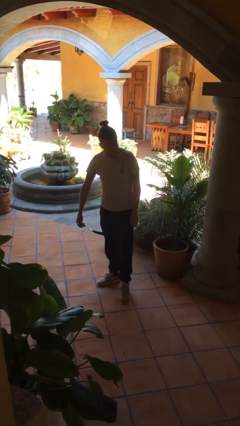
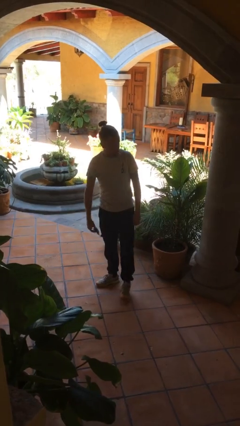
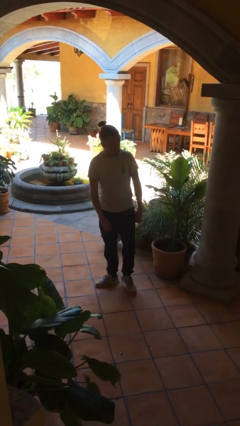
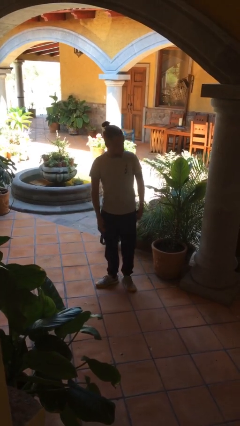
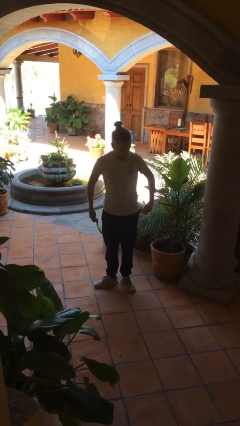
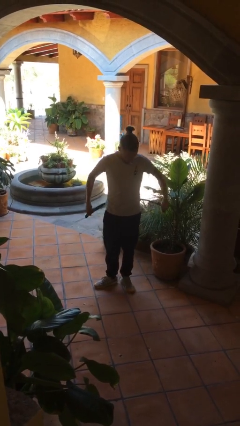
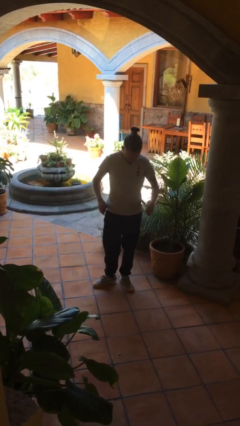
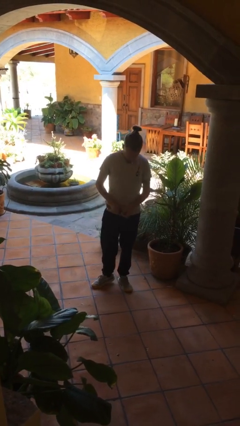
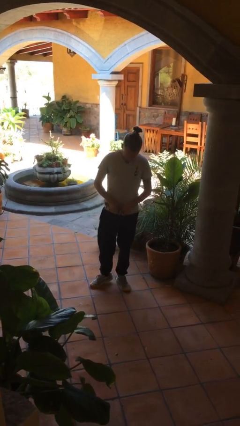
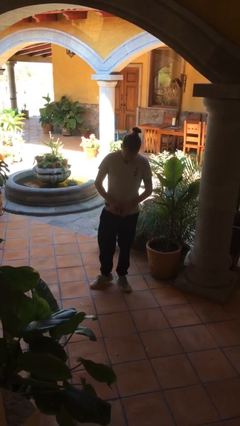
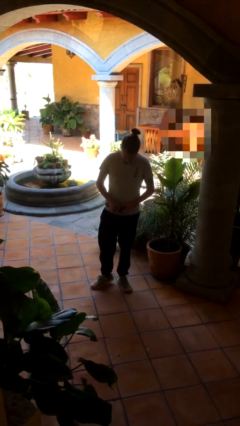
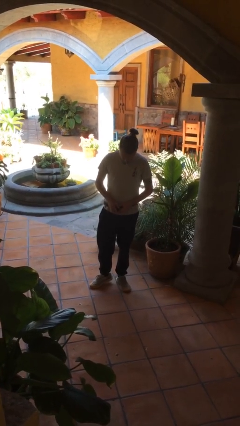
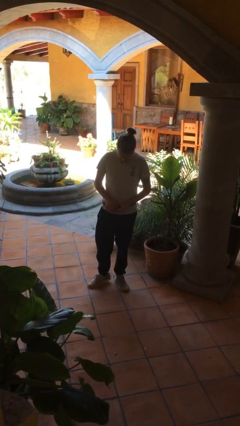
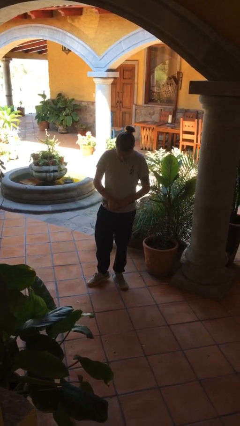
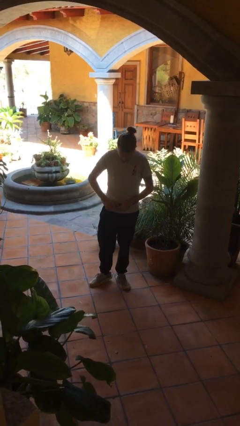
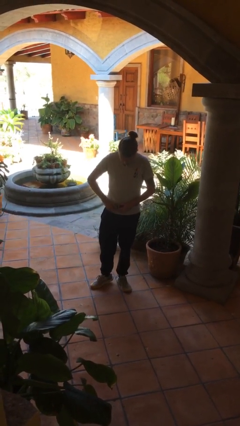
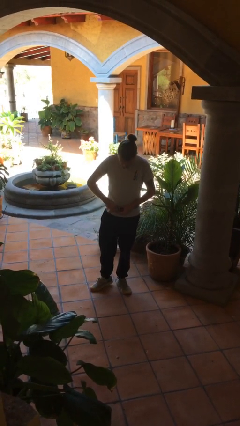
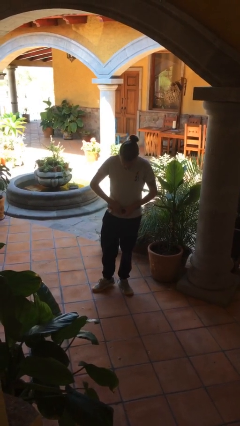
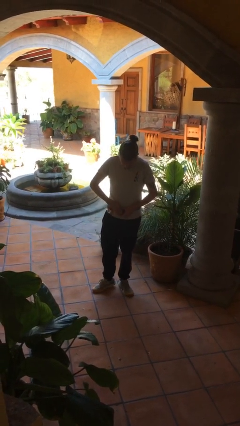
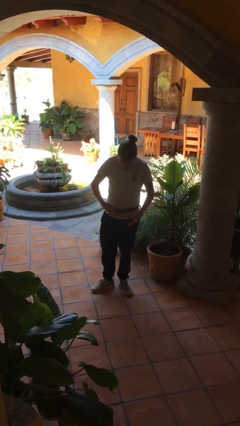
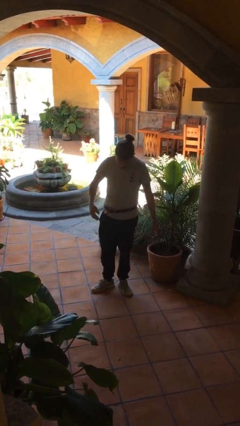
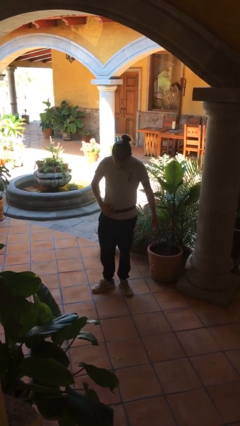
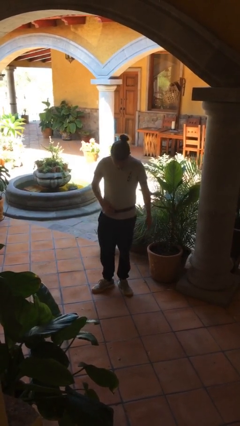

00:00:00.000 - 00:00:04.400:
person puts on belt

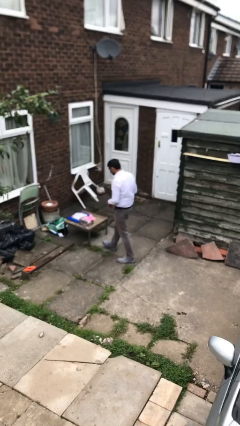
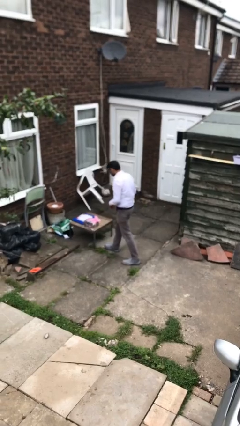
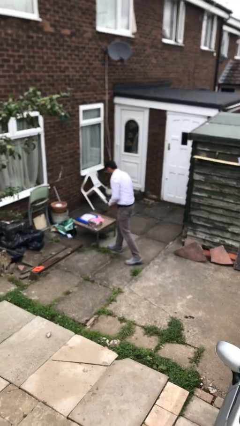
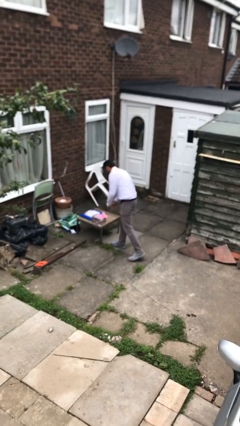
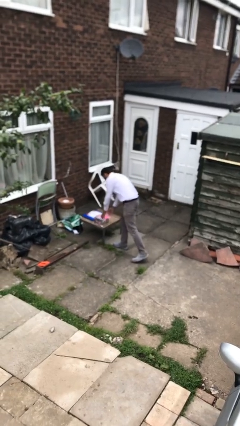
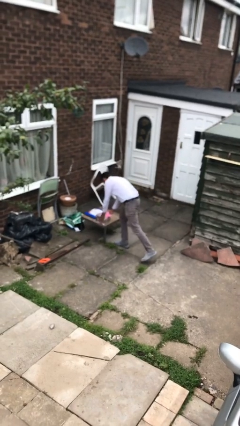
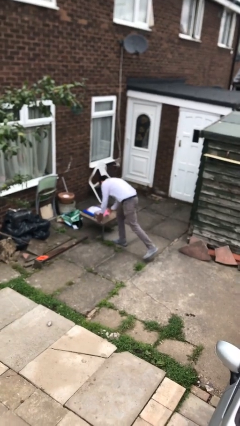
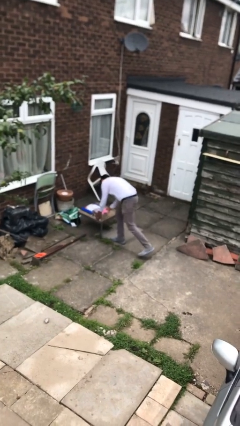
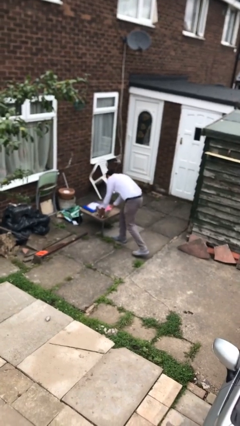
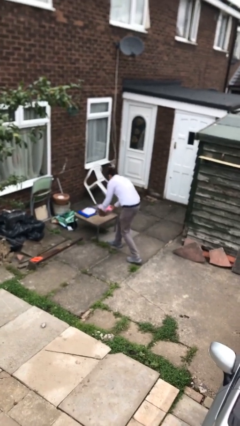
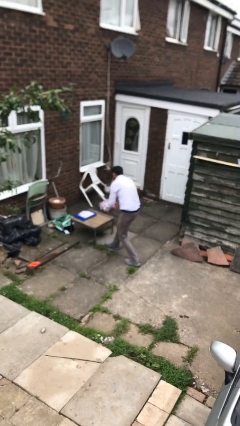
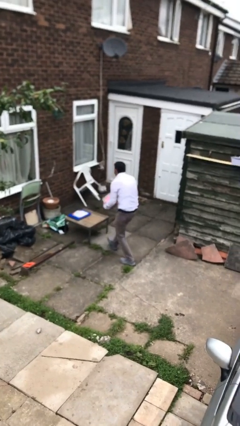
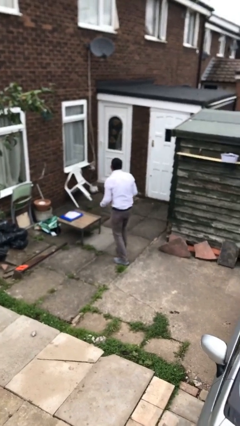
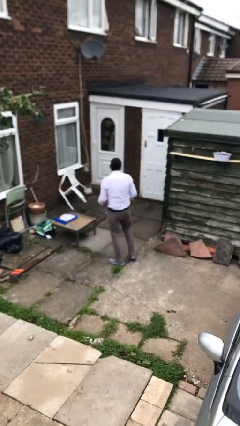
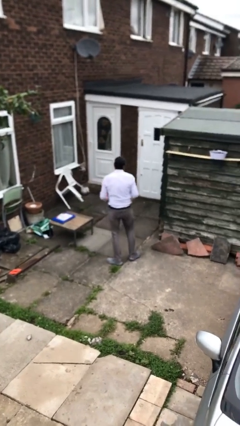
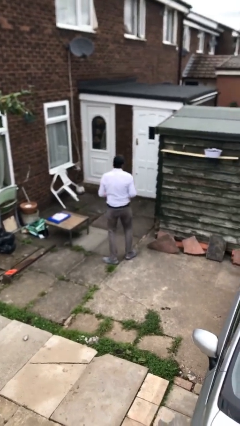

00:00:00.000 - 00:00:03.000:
person picks up object from table

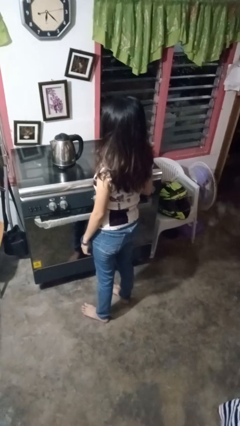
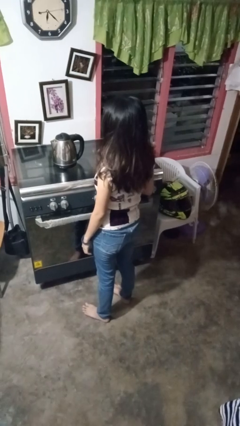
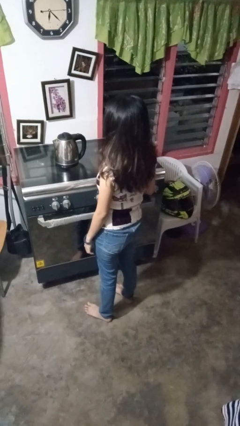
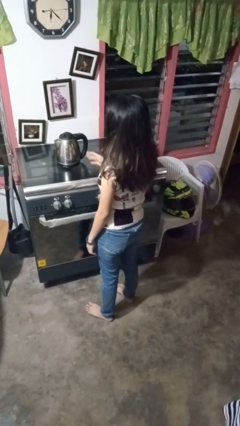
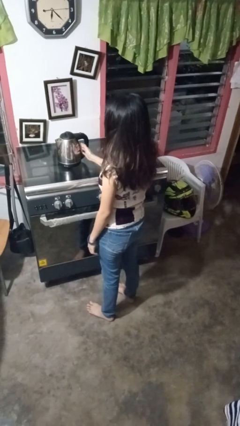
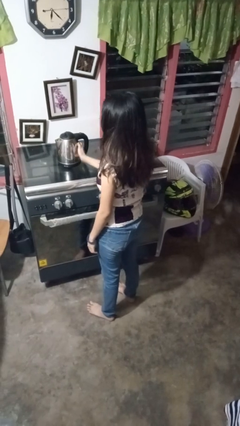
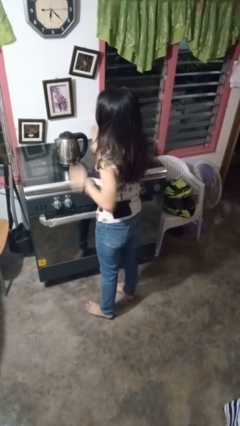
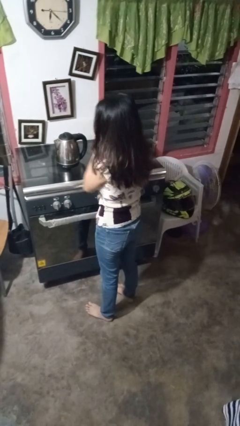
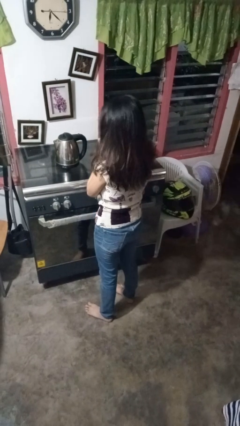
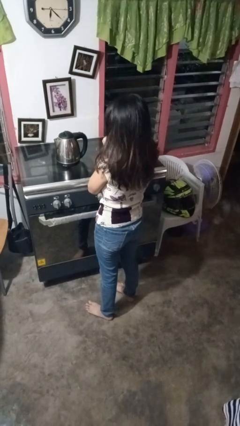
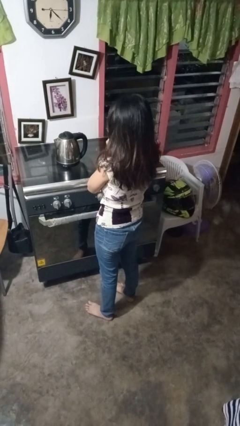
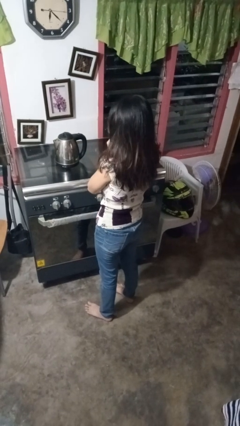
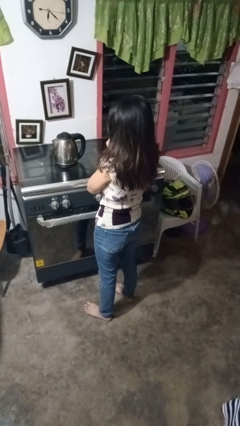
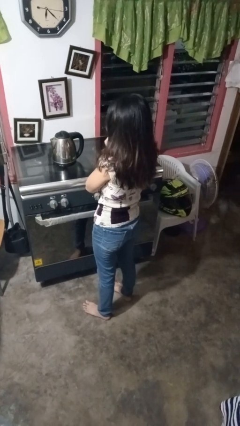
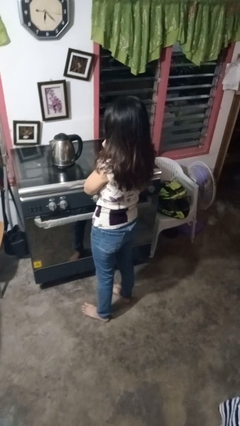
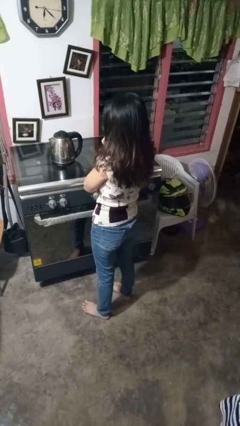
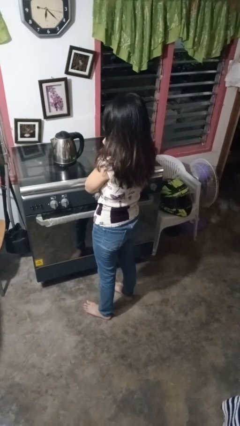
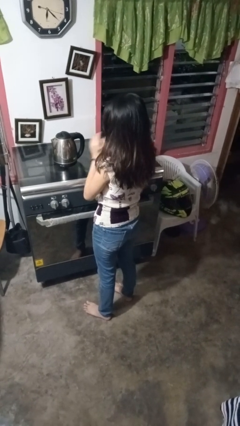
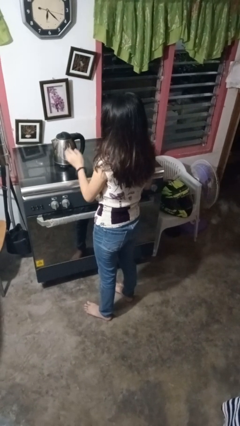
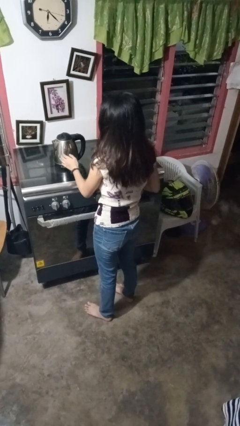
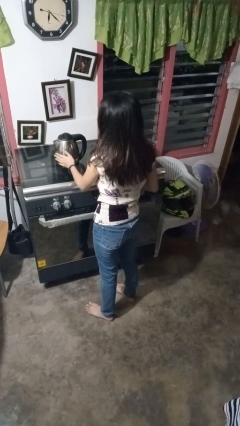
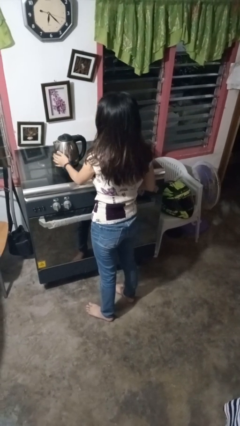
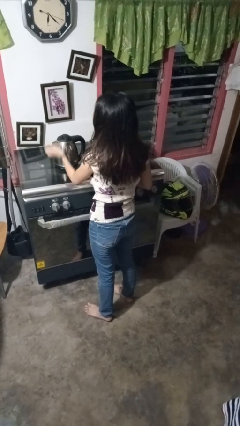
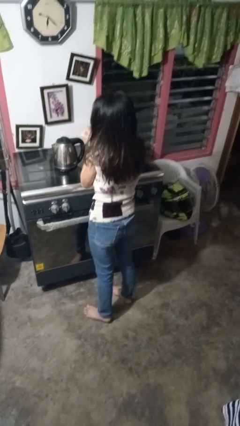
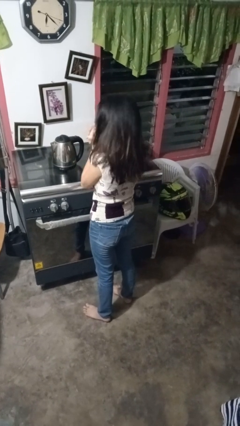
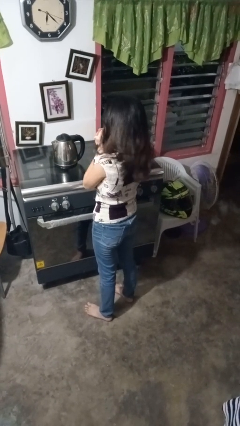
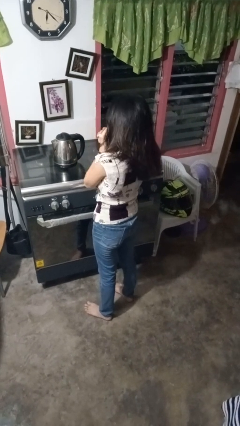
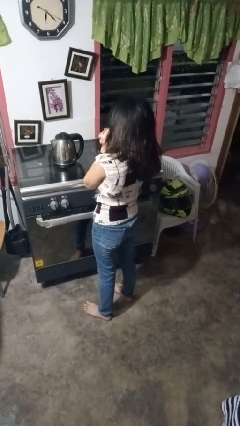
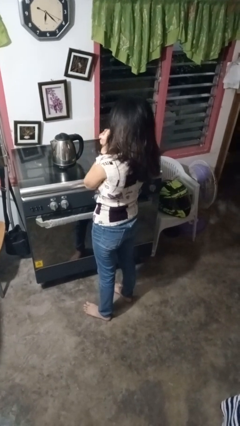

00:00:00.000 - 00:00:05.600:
person puts on hoodie

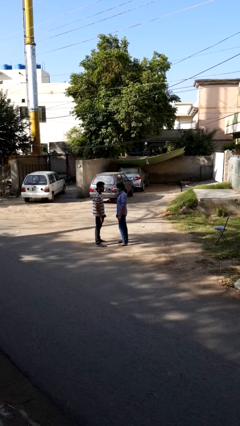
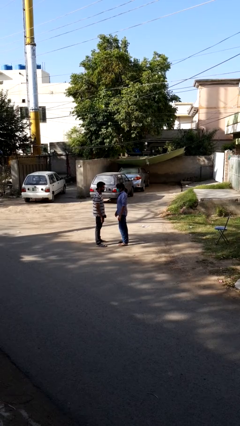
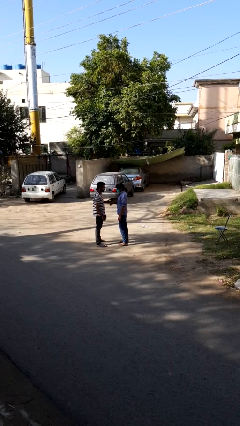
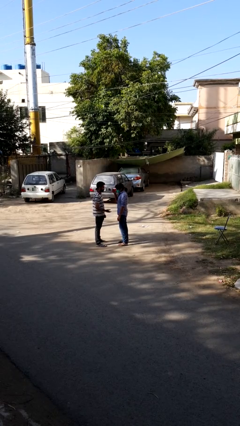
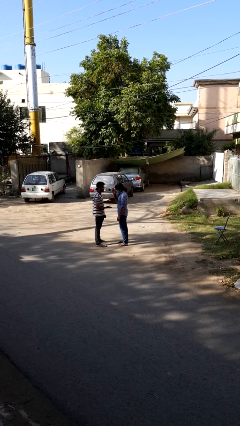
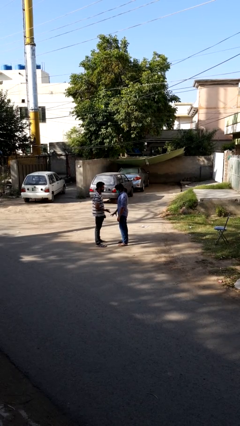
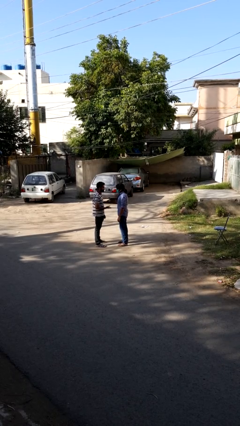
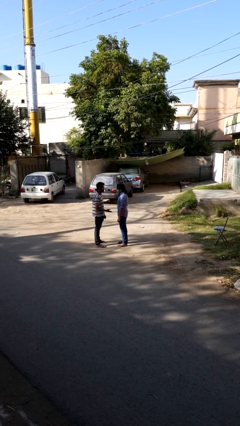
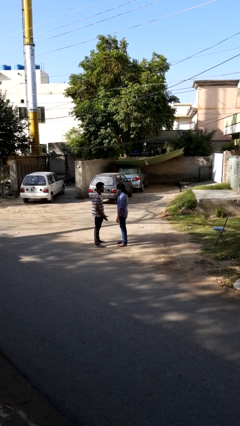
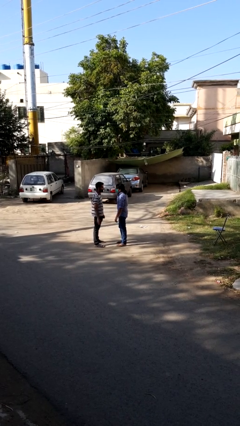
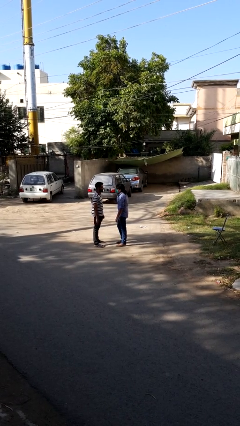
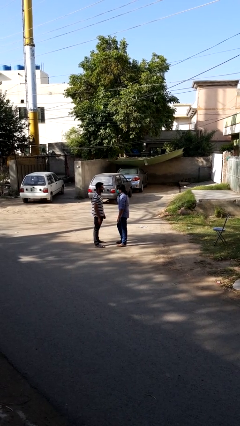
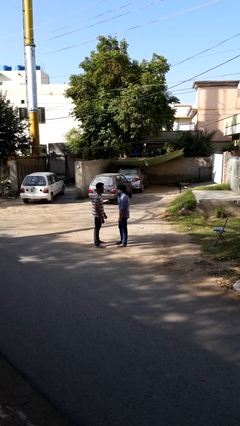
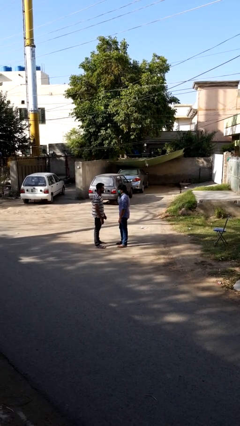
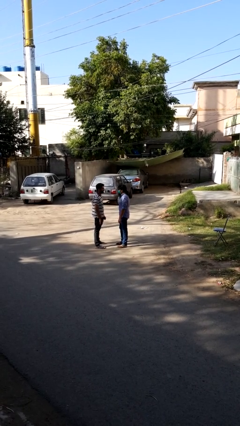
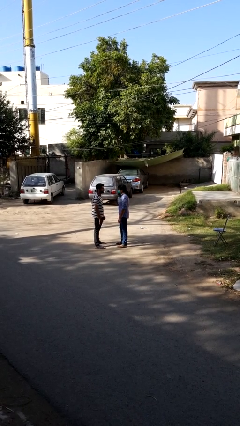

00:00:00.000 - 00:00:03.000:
person highfives hand

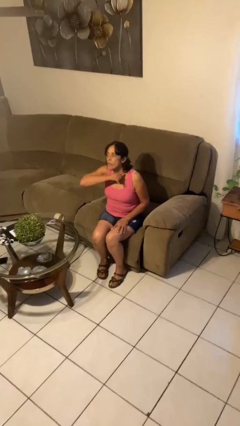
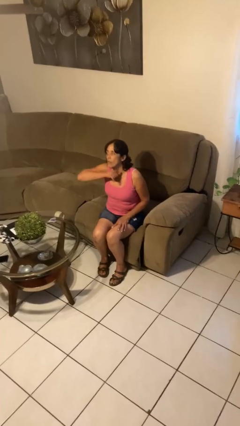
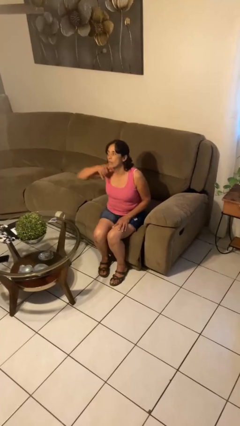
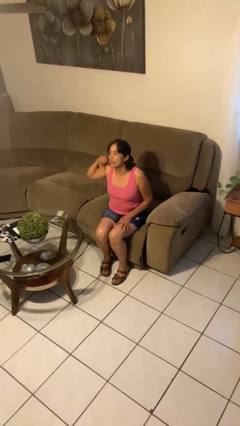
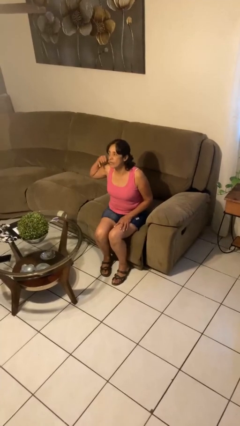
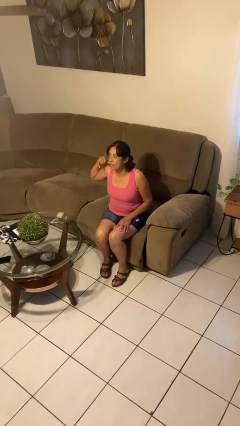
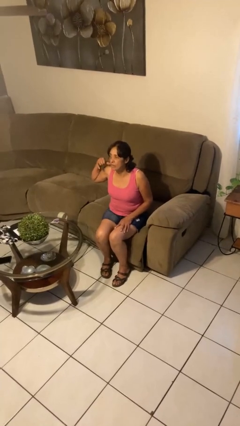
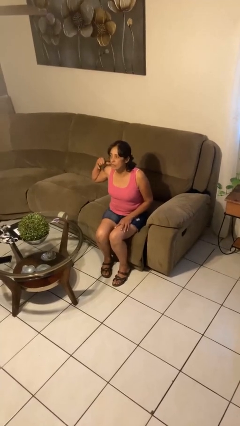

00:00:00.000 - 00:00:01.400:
person gestures cut
